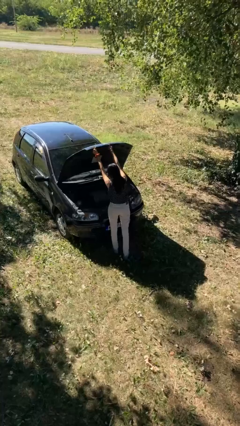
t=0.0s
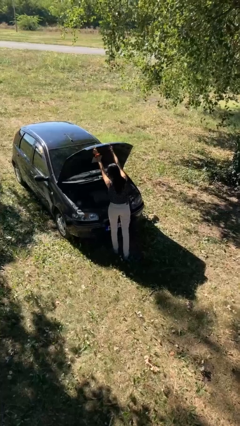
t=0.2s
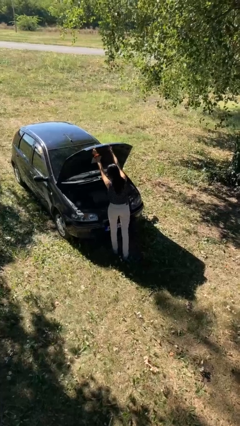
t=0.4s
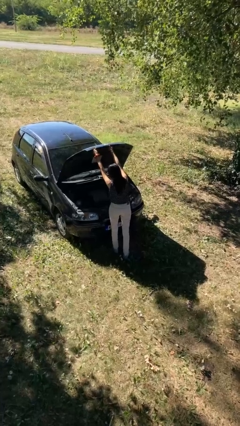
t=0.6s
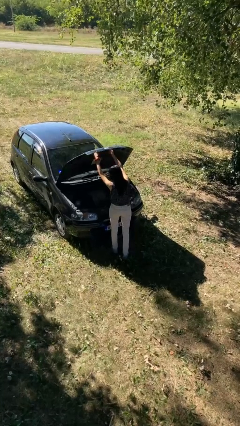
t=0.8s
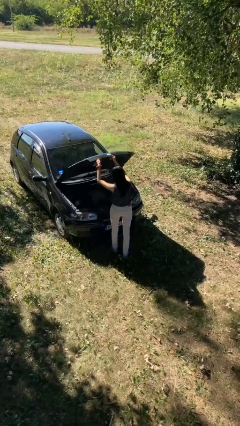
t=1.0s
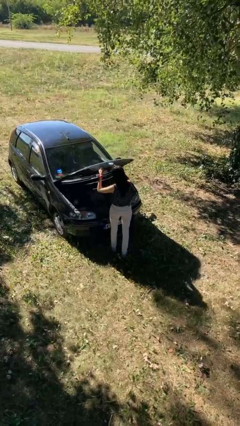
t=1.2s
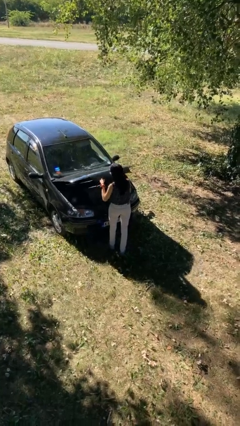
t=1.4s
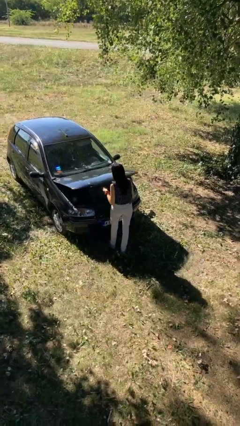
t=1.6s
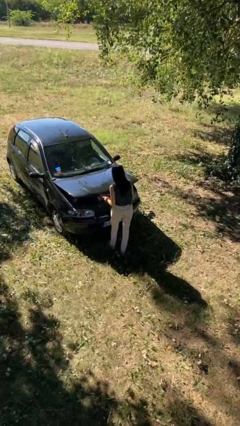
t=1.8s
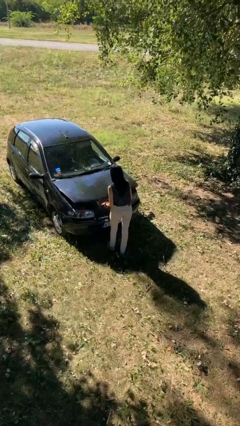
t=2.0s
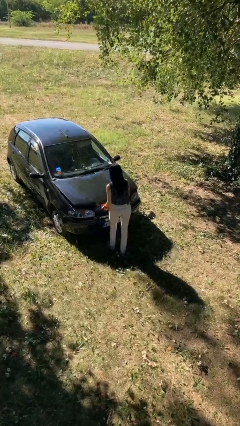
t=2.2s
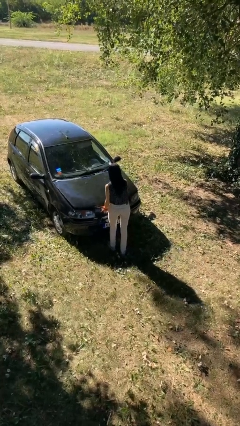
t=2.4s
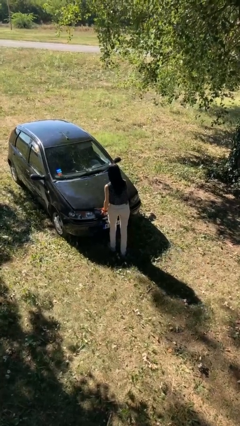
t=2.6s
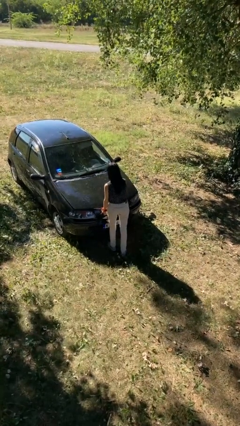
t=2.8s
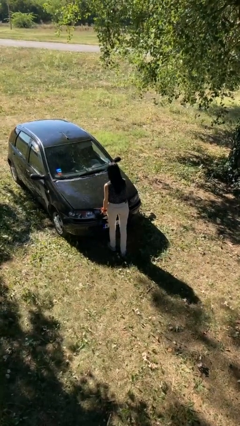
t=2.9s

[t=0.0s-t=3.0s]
person closes car hood

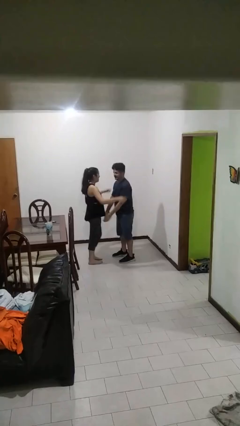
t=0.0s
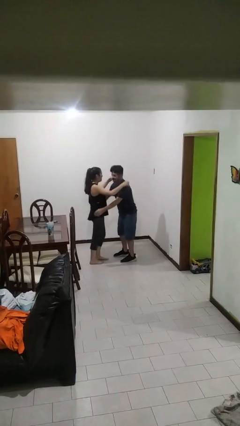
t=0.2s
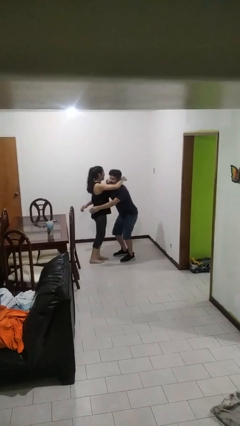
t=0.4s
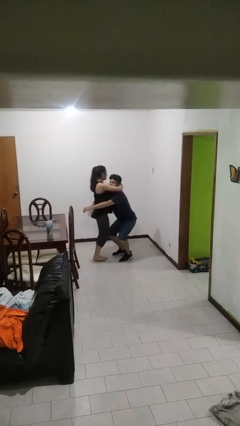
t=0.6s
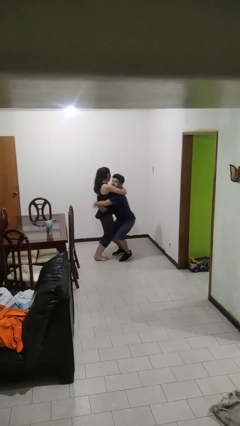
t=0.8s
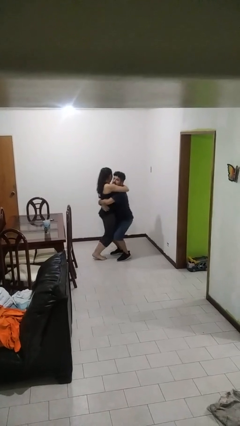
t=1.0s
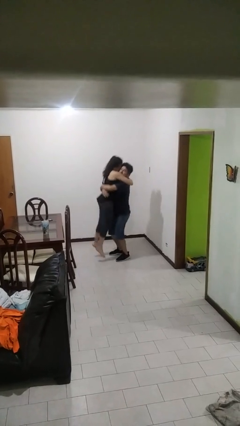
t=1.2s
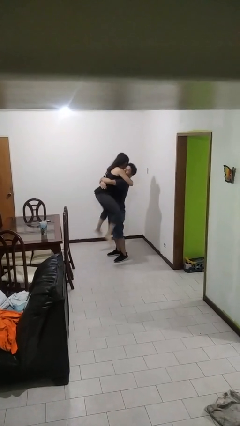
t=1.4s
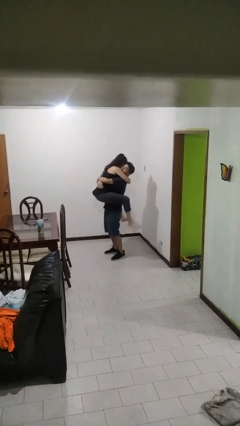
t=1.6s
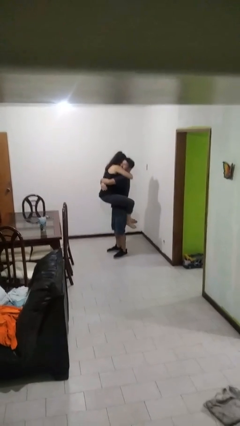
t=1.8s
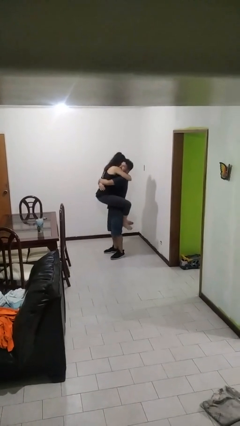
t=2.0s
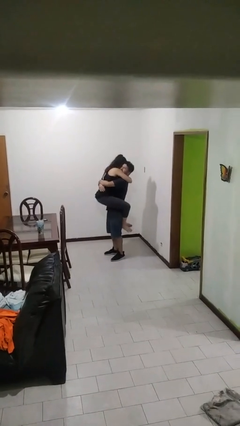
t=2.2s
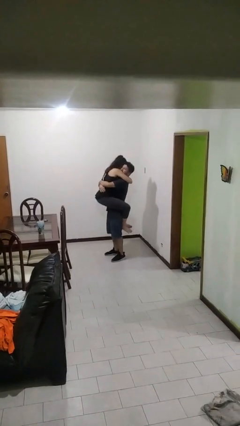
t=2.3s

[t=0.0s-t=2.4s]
person picks up person

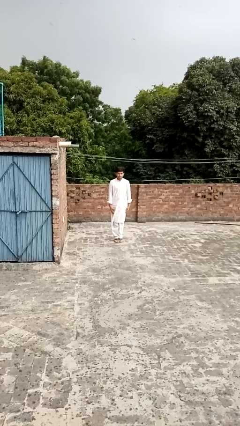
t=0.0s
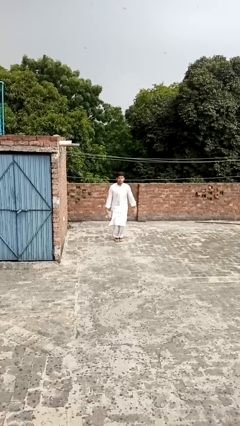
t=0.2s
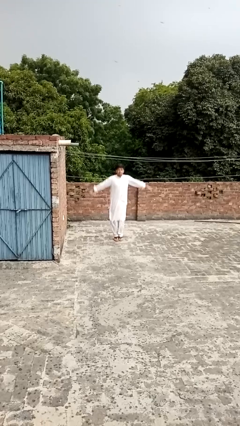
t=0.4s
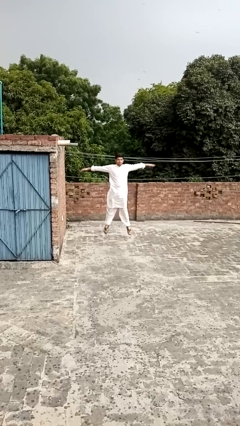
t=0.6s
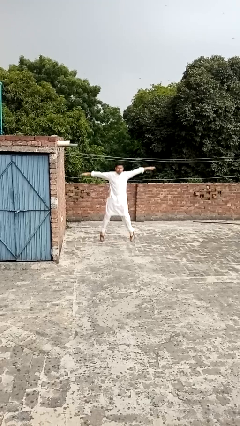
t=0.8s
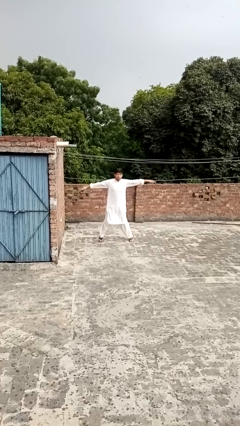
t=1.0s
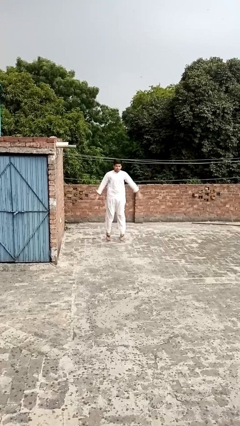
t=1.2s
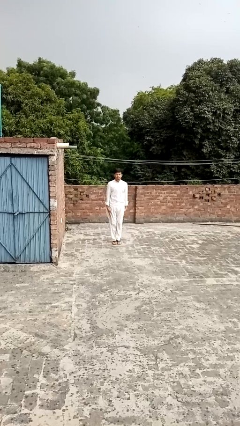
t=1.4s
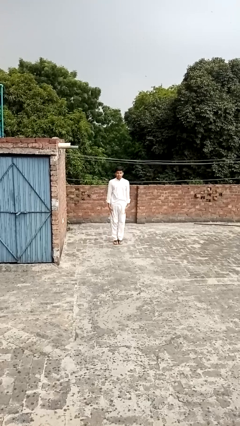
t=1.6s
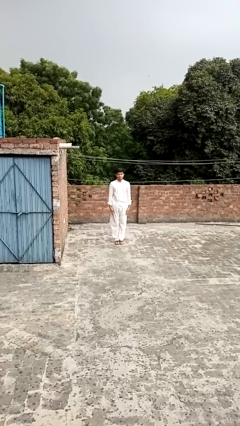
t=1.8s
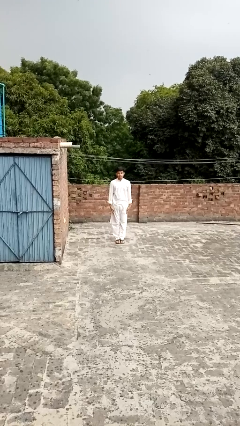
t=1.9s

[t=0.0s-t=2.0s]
person exercises with jumping jacks

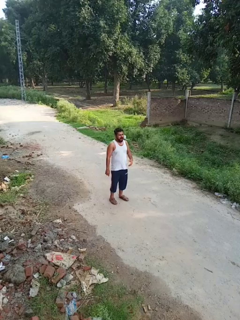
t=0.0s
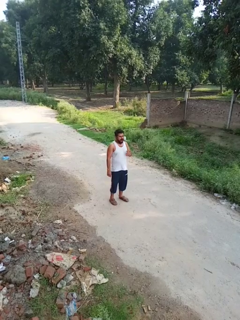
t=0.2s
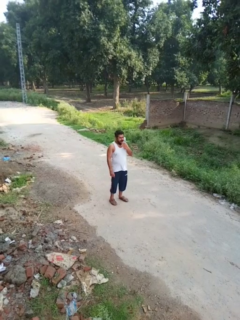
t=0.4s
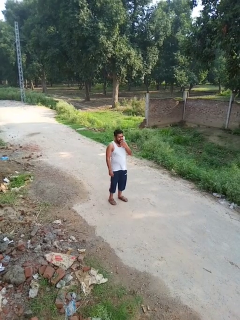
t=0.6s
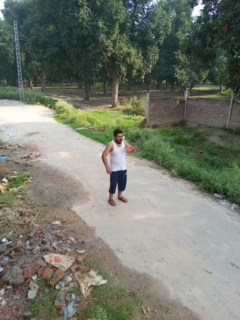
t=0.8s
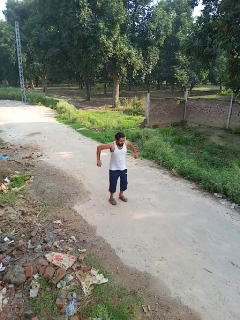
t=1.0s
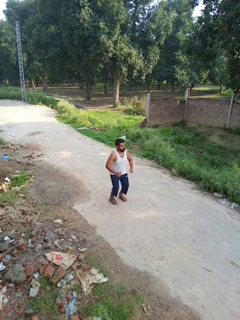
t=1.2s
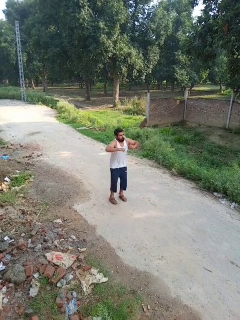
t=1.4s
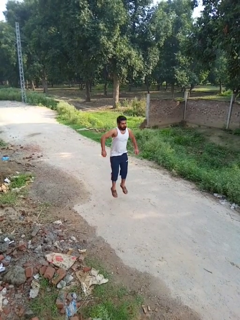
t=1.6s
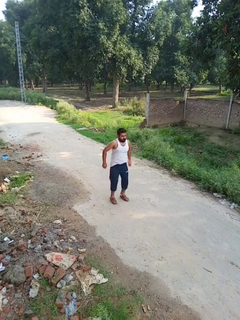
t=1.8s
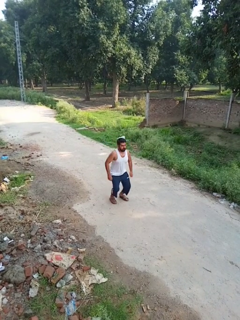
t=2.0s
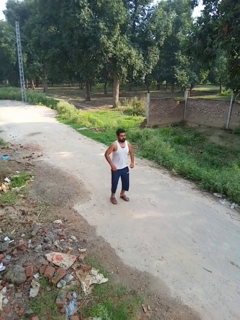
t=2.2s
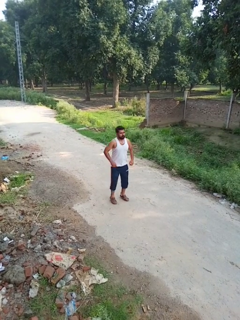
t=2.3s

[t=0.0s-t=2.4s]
person jumps

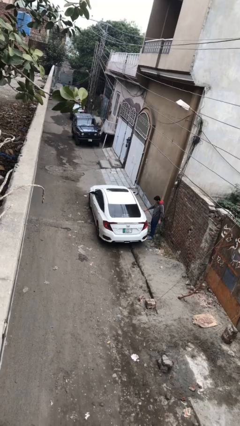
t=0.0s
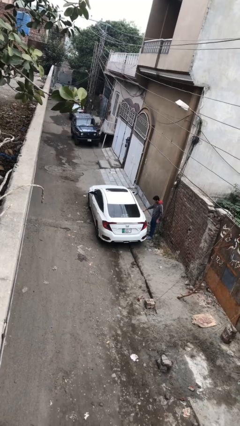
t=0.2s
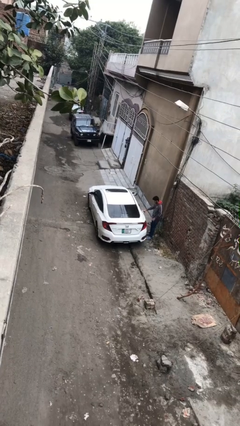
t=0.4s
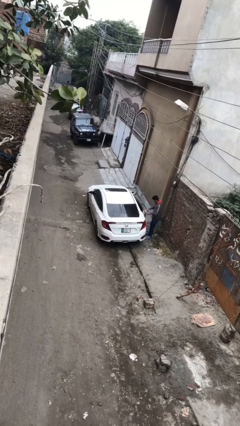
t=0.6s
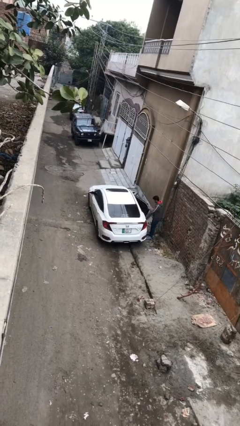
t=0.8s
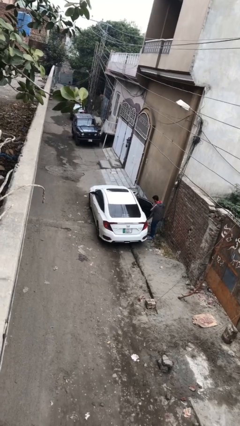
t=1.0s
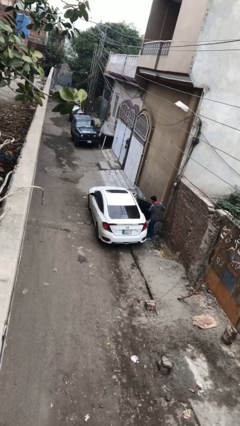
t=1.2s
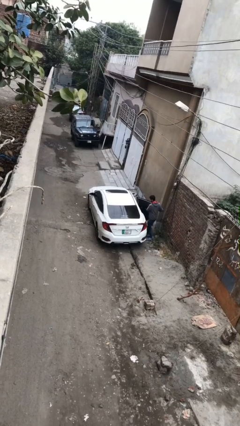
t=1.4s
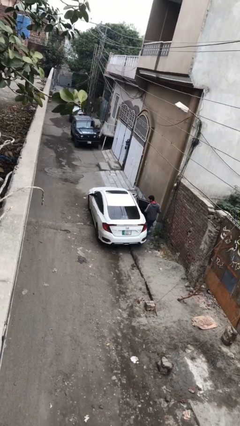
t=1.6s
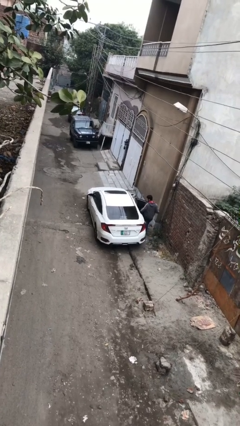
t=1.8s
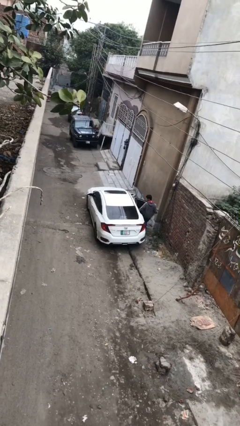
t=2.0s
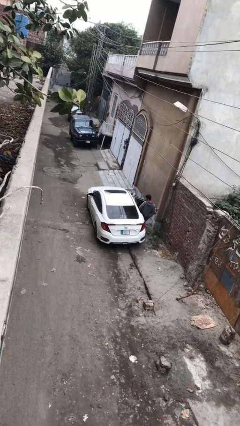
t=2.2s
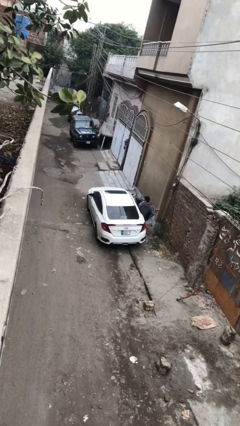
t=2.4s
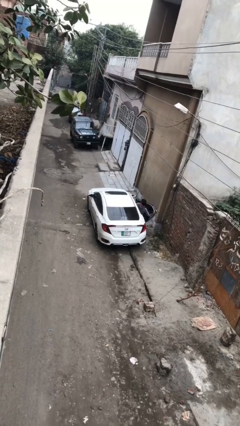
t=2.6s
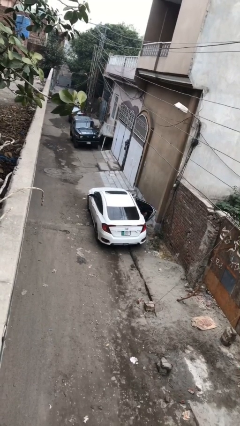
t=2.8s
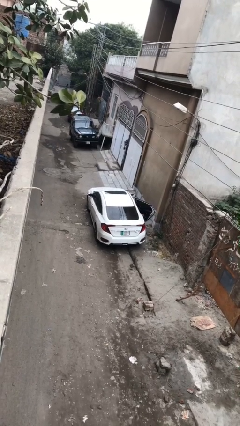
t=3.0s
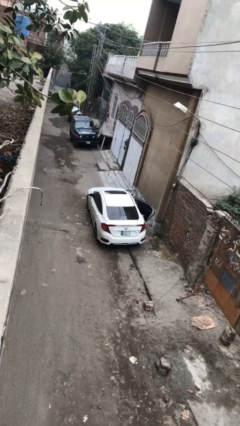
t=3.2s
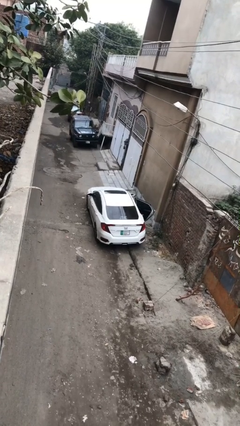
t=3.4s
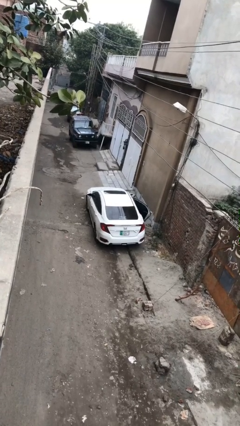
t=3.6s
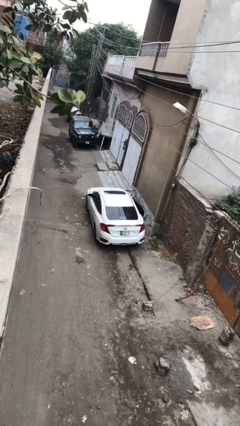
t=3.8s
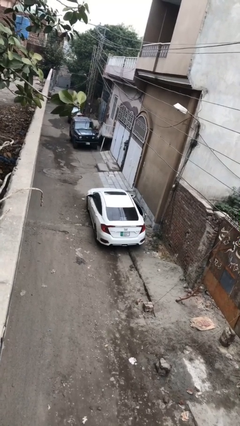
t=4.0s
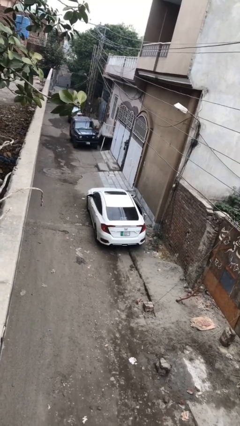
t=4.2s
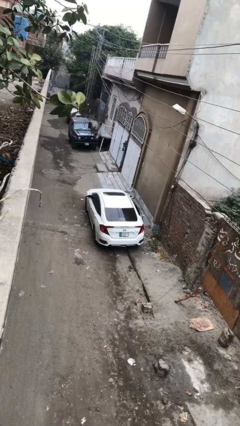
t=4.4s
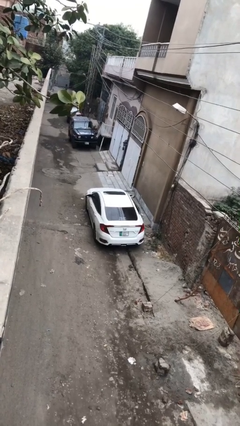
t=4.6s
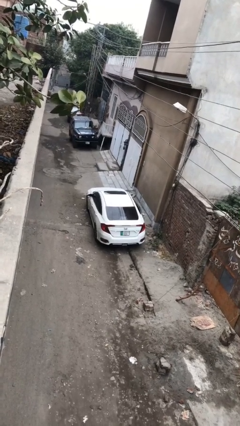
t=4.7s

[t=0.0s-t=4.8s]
car picks up person

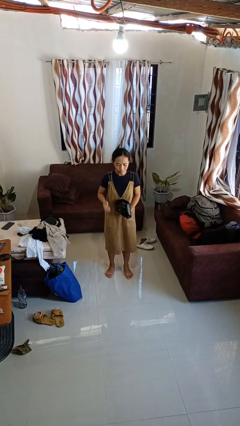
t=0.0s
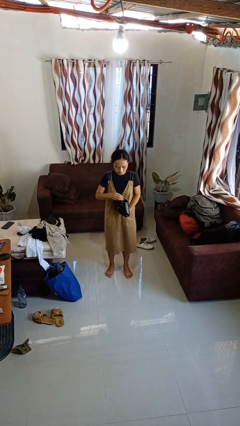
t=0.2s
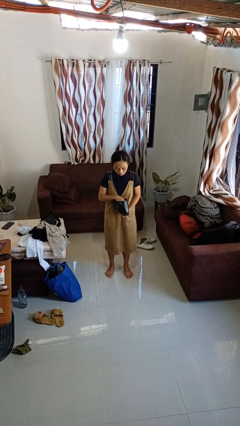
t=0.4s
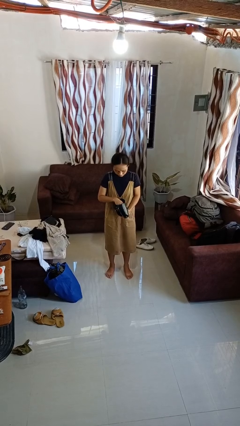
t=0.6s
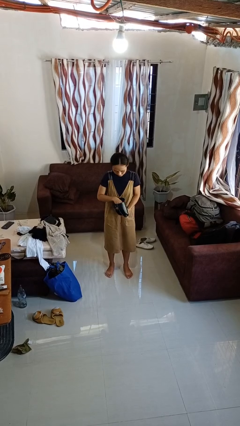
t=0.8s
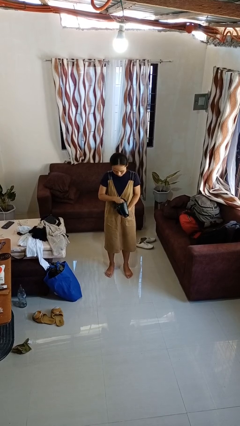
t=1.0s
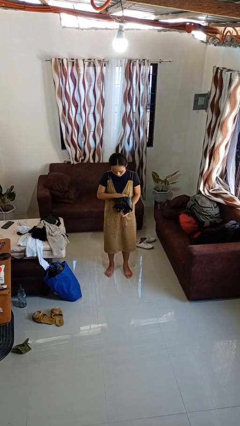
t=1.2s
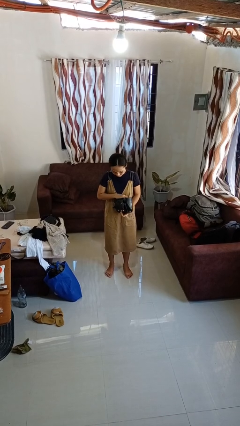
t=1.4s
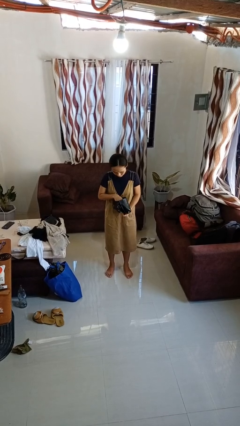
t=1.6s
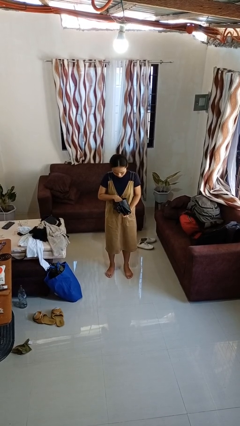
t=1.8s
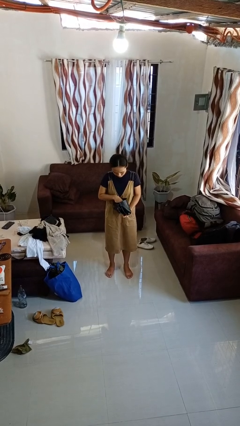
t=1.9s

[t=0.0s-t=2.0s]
person searches in purse

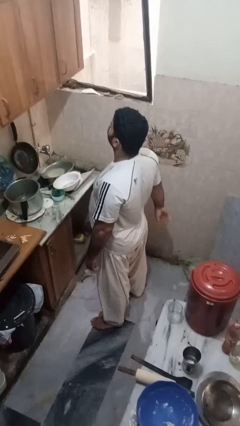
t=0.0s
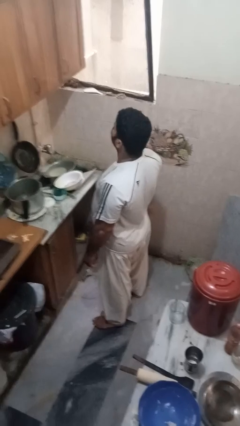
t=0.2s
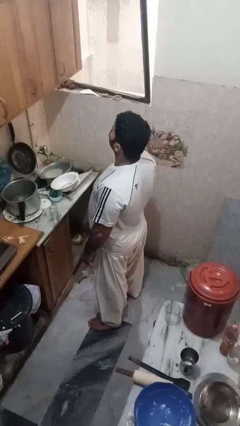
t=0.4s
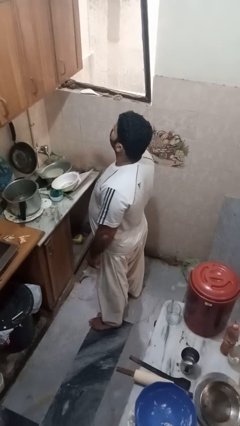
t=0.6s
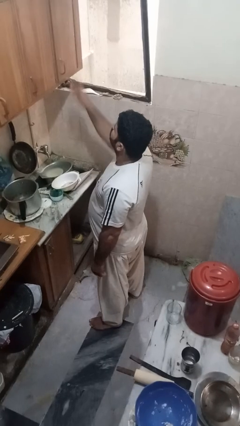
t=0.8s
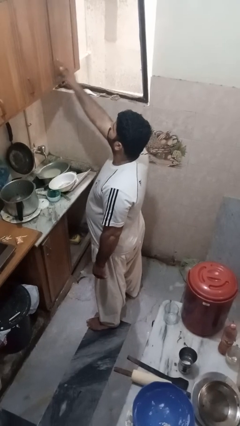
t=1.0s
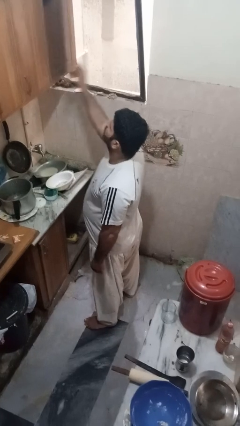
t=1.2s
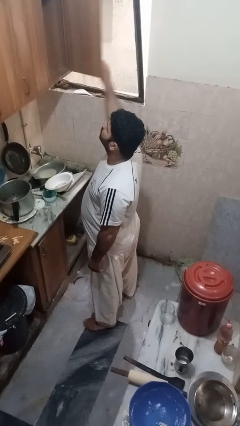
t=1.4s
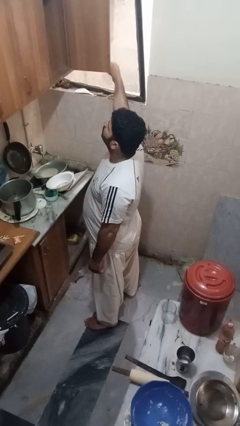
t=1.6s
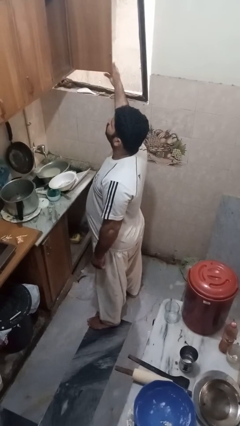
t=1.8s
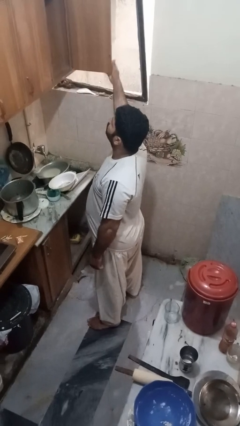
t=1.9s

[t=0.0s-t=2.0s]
person opens cabinet
